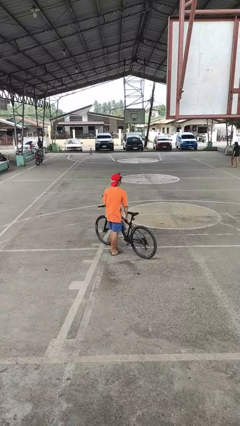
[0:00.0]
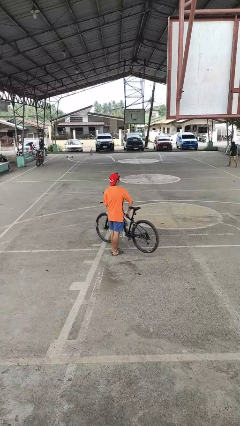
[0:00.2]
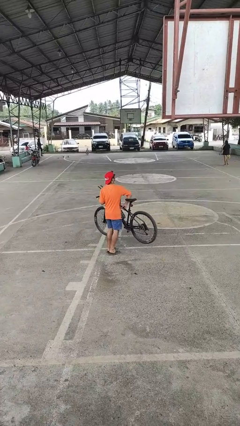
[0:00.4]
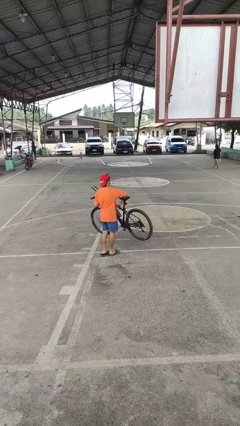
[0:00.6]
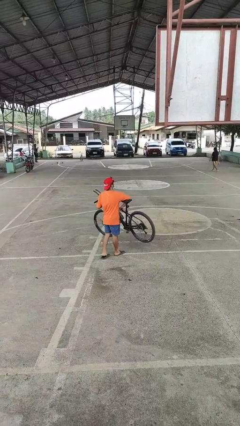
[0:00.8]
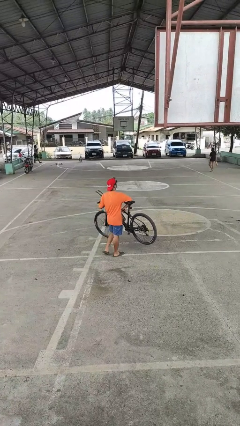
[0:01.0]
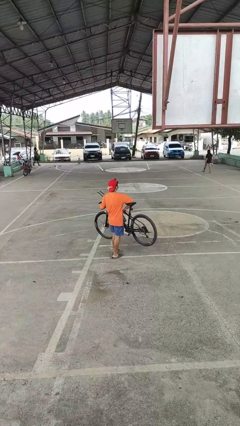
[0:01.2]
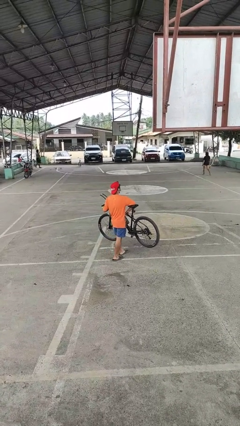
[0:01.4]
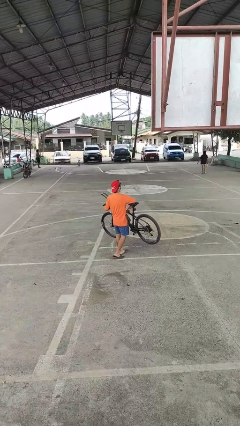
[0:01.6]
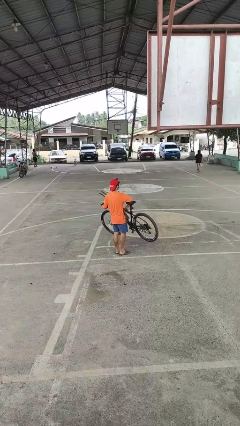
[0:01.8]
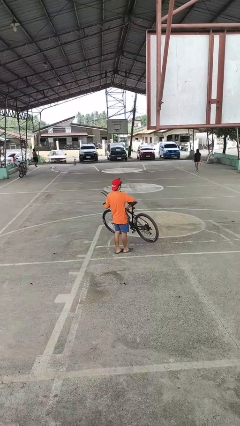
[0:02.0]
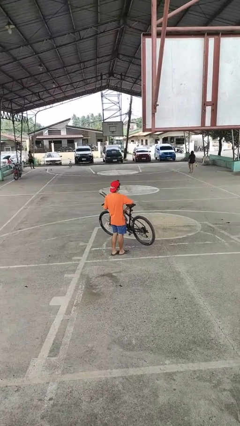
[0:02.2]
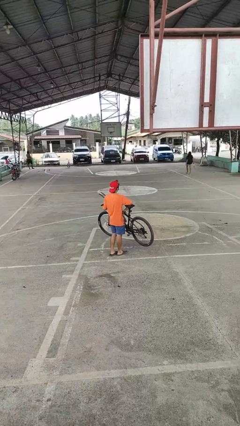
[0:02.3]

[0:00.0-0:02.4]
person carries bicycle

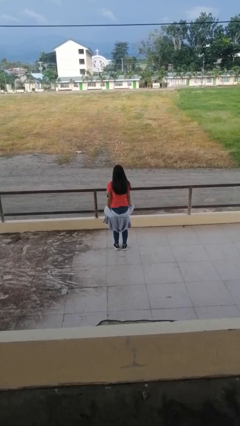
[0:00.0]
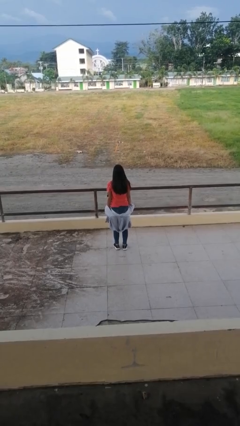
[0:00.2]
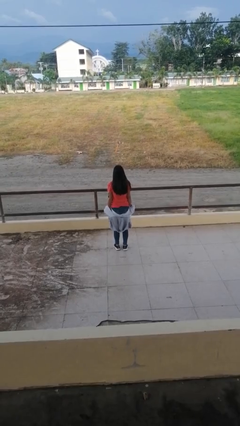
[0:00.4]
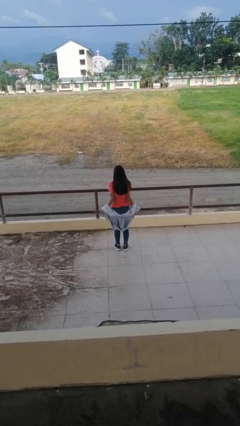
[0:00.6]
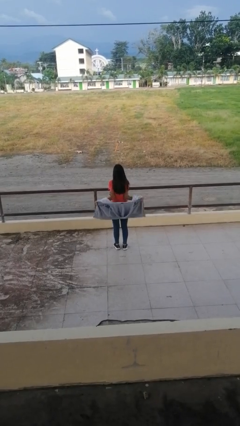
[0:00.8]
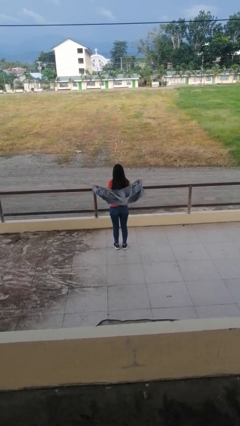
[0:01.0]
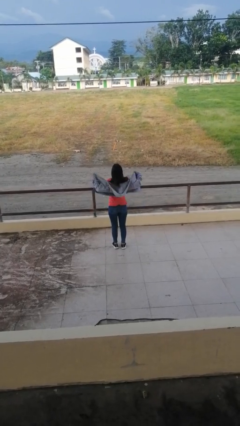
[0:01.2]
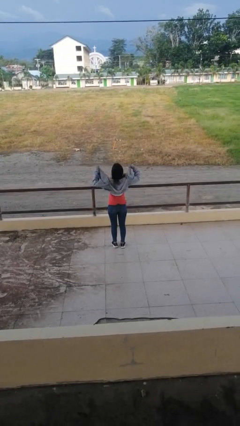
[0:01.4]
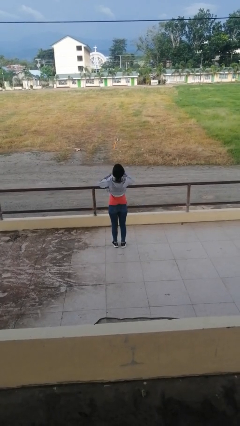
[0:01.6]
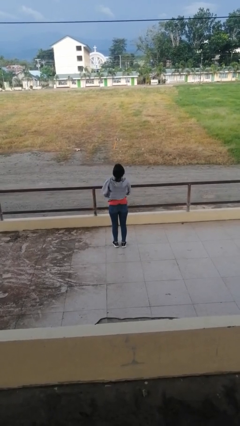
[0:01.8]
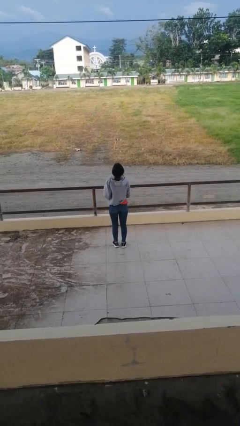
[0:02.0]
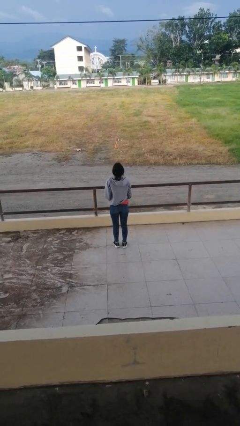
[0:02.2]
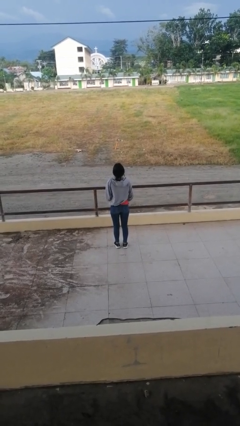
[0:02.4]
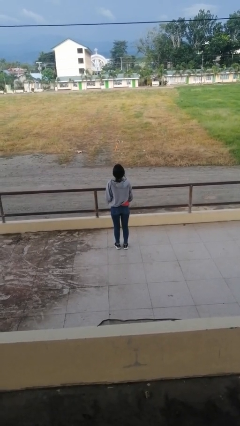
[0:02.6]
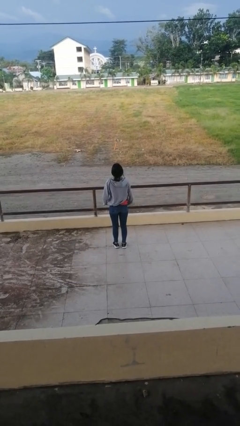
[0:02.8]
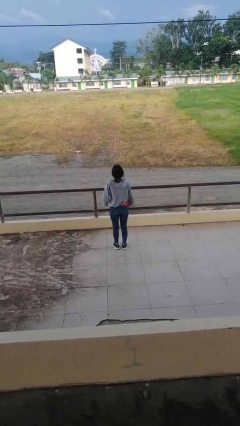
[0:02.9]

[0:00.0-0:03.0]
person puts on jacket

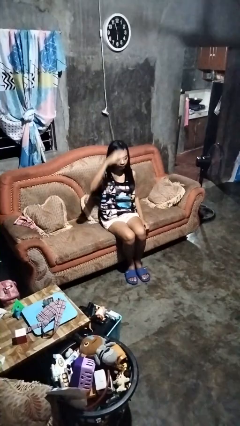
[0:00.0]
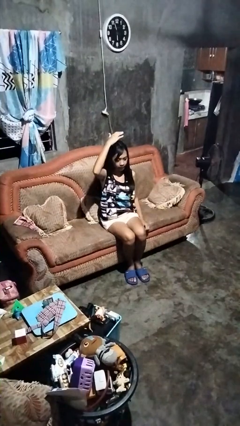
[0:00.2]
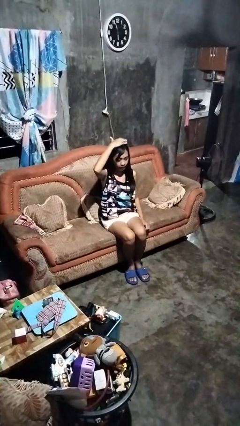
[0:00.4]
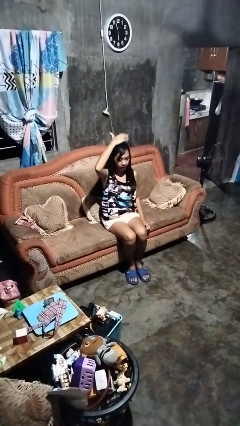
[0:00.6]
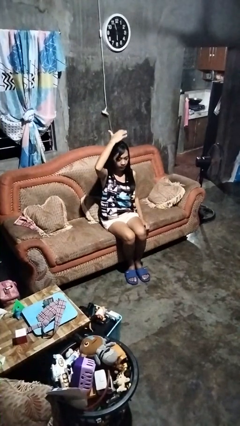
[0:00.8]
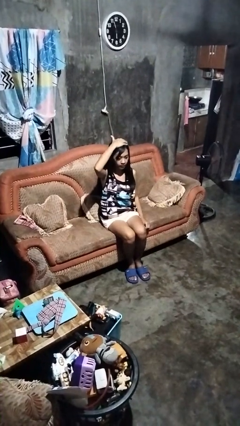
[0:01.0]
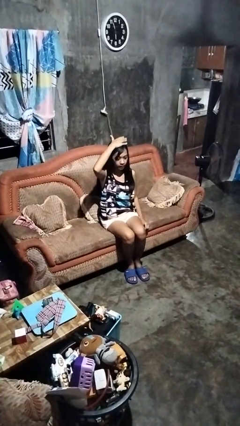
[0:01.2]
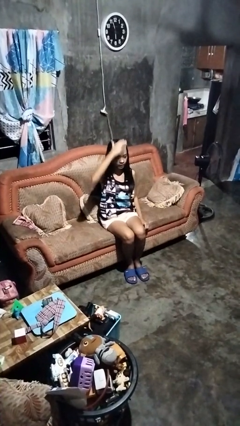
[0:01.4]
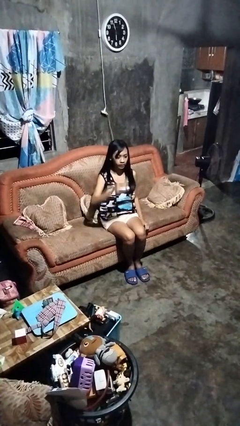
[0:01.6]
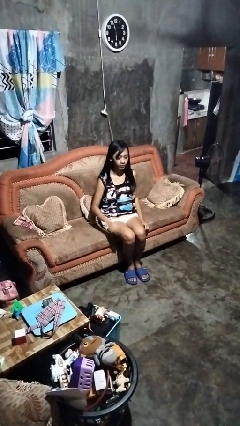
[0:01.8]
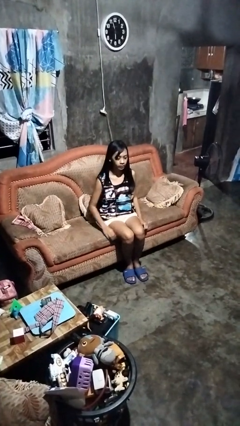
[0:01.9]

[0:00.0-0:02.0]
person pats head

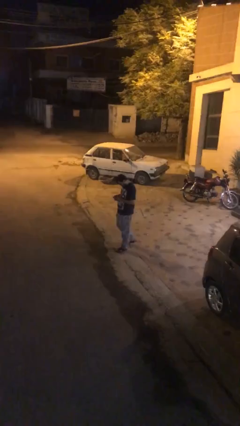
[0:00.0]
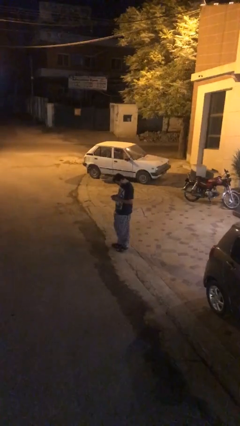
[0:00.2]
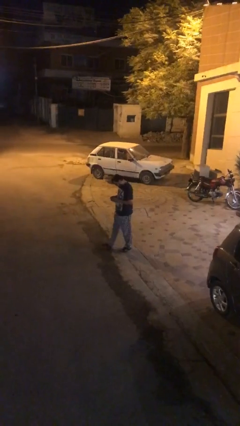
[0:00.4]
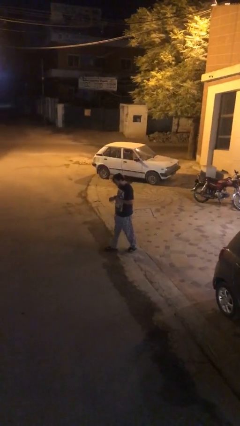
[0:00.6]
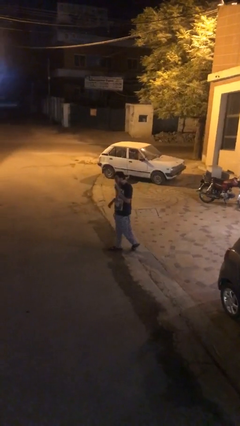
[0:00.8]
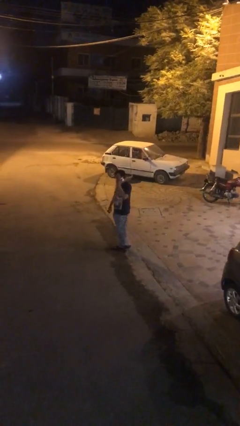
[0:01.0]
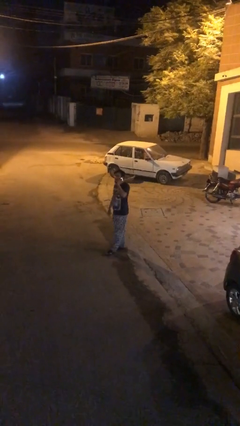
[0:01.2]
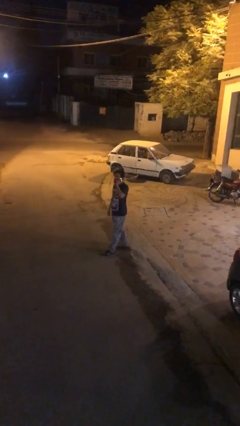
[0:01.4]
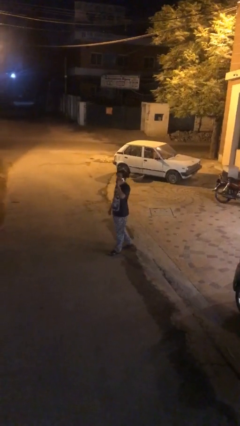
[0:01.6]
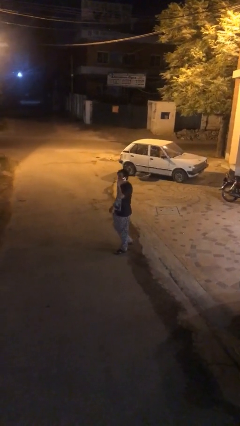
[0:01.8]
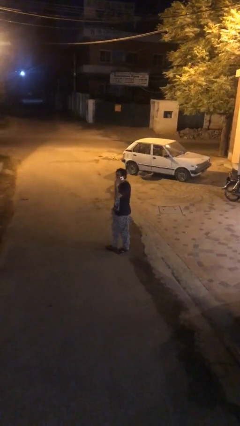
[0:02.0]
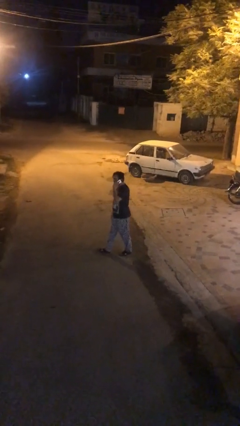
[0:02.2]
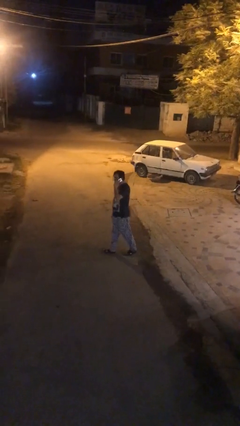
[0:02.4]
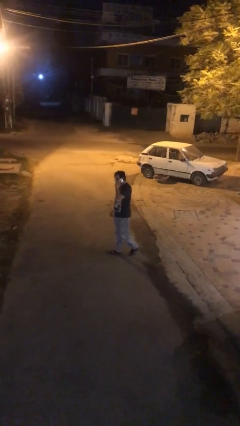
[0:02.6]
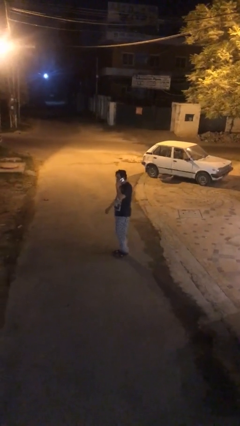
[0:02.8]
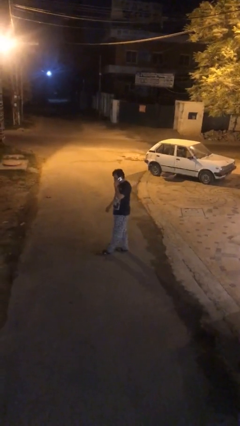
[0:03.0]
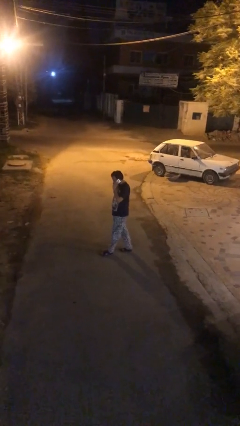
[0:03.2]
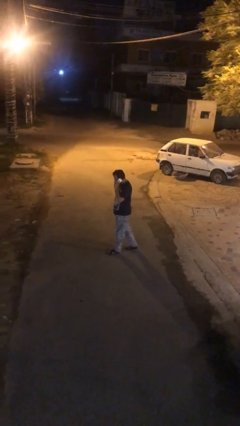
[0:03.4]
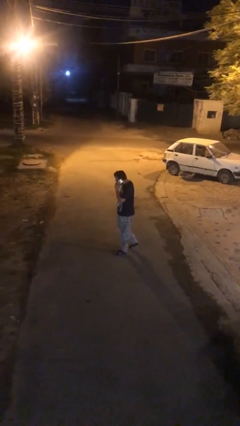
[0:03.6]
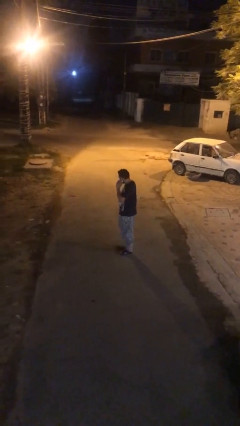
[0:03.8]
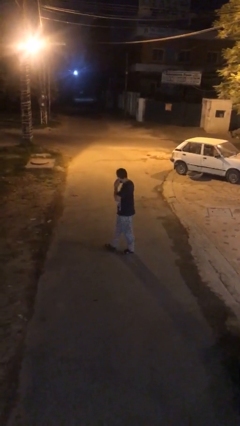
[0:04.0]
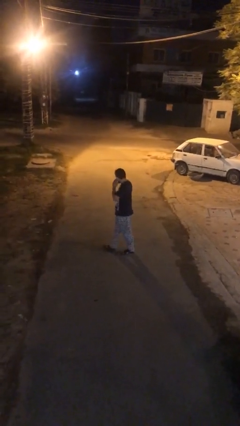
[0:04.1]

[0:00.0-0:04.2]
person talks on phone

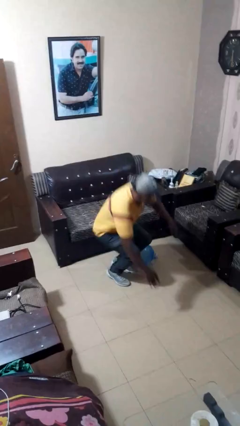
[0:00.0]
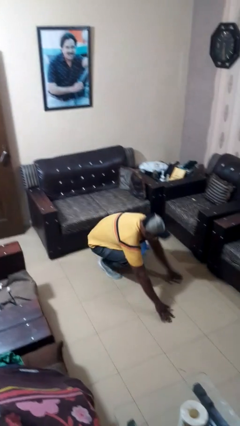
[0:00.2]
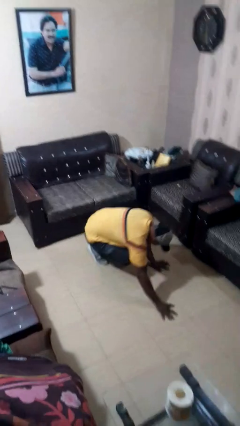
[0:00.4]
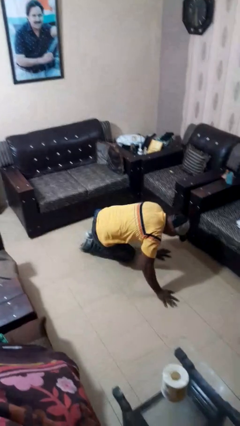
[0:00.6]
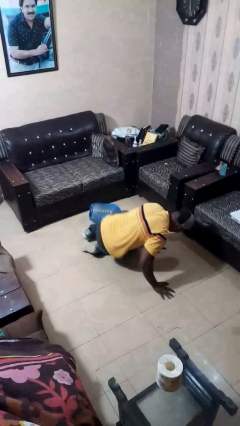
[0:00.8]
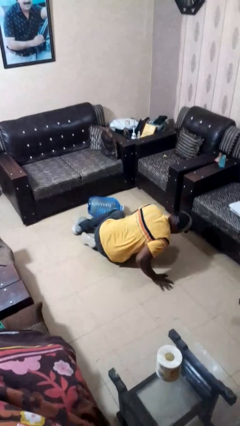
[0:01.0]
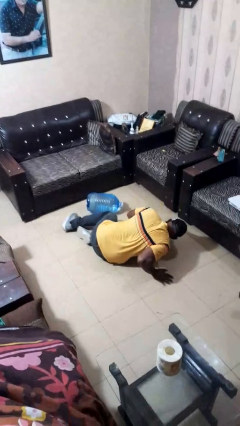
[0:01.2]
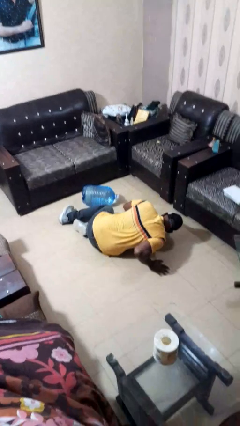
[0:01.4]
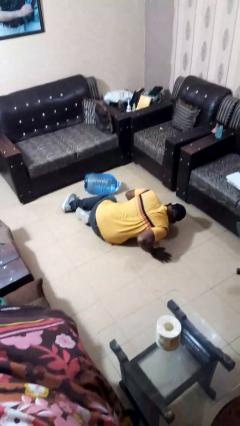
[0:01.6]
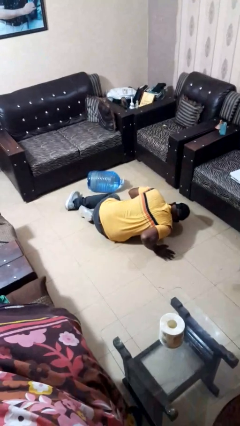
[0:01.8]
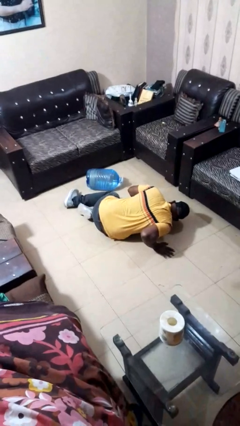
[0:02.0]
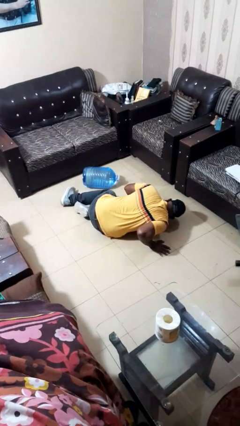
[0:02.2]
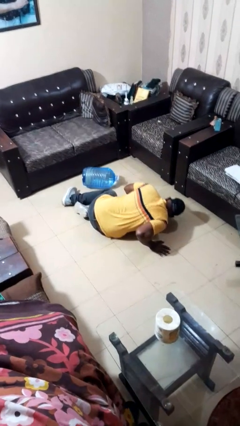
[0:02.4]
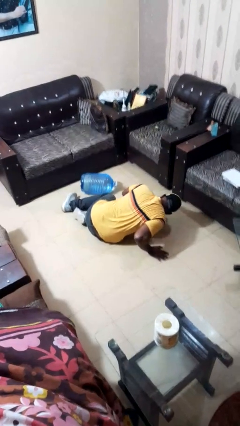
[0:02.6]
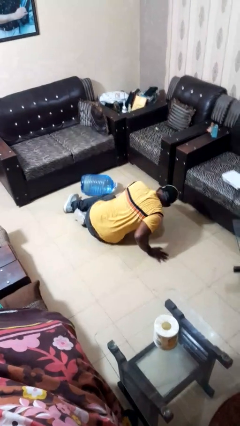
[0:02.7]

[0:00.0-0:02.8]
person lies down on floor

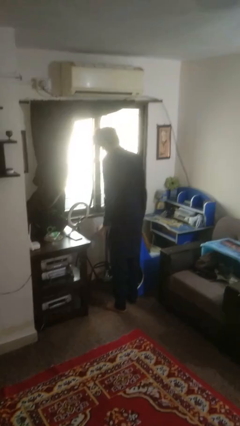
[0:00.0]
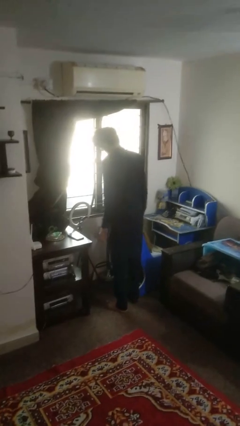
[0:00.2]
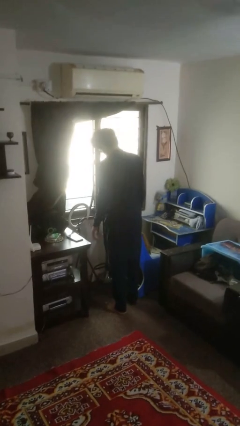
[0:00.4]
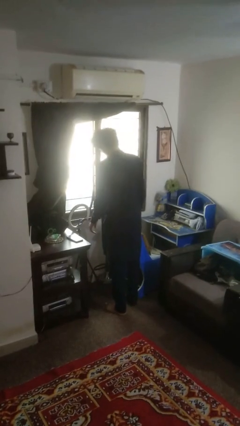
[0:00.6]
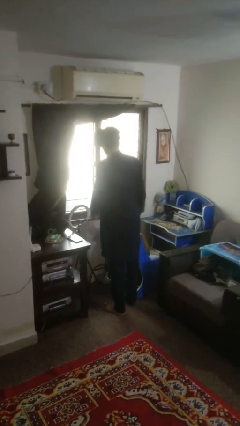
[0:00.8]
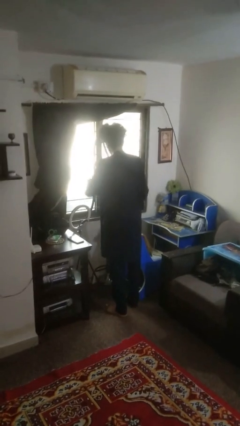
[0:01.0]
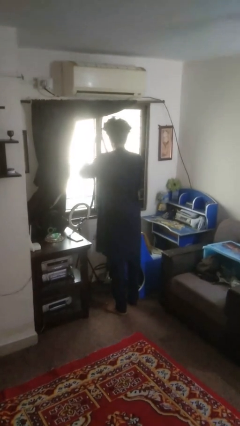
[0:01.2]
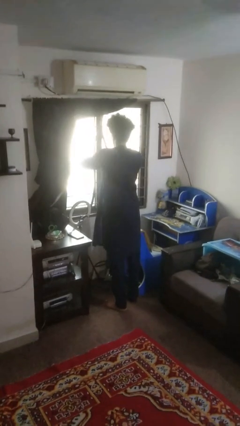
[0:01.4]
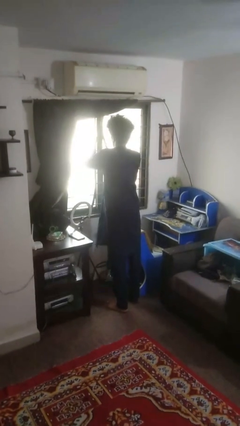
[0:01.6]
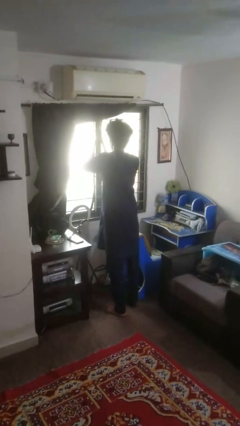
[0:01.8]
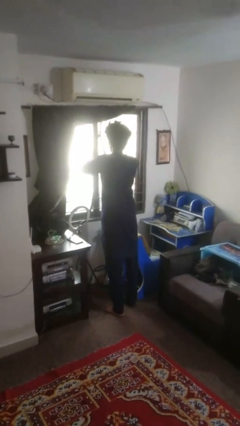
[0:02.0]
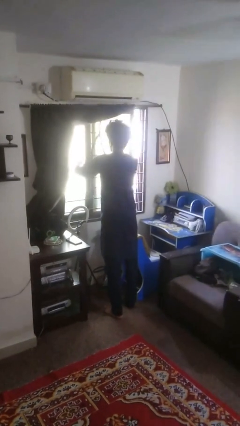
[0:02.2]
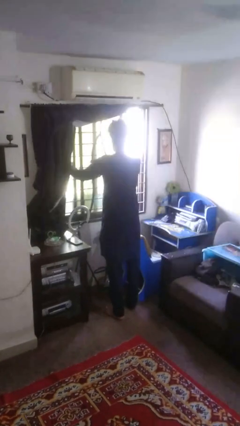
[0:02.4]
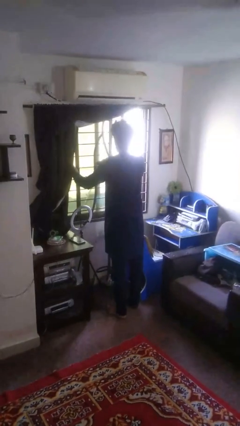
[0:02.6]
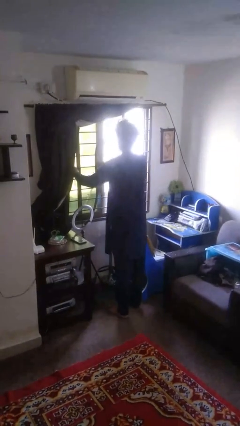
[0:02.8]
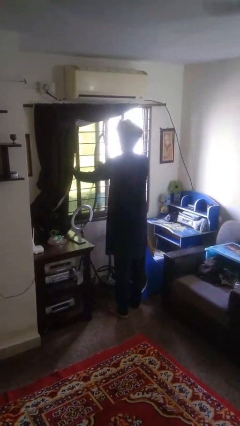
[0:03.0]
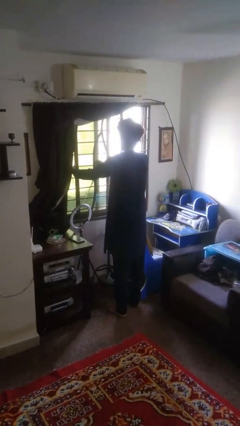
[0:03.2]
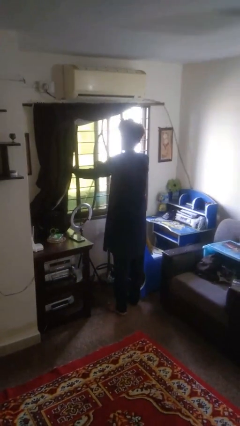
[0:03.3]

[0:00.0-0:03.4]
person opens home window
